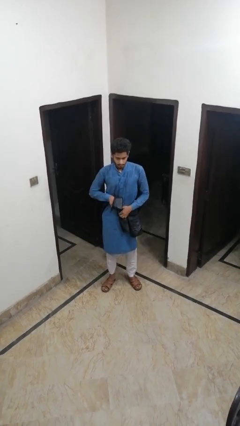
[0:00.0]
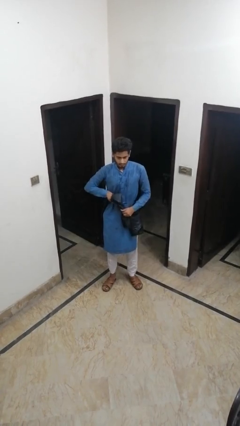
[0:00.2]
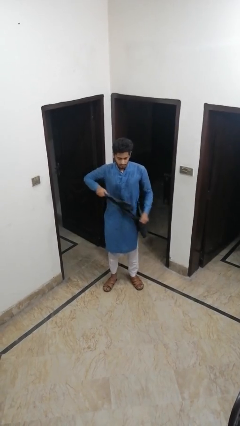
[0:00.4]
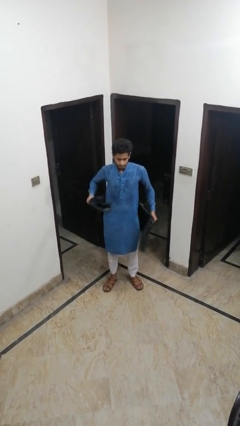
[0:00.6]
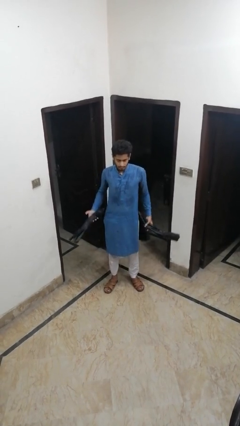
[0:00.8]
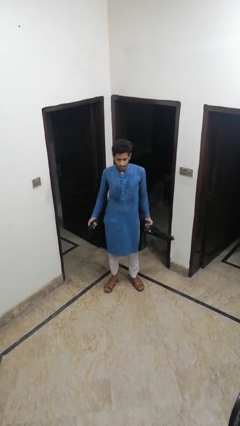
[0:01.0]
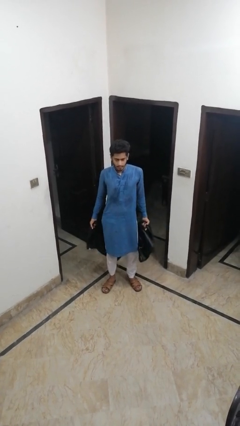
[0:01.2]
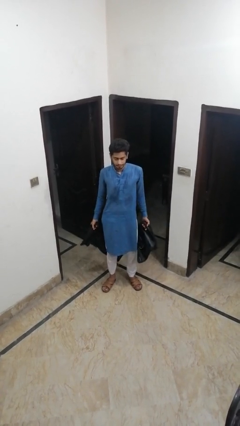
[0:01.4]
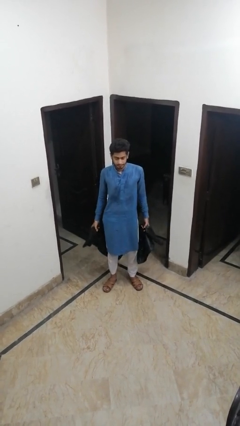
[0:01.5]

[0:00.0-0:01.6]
person unties jacket around waist

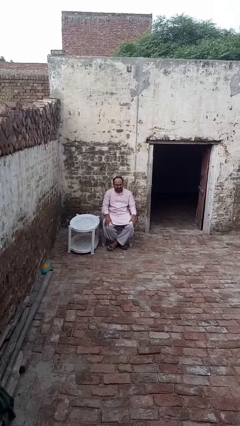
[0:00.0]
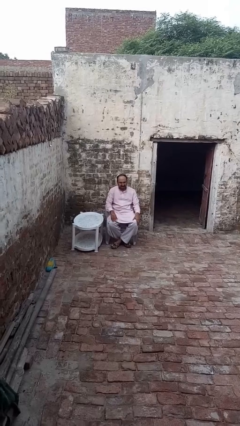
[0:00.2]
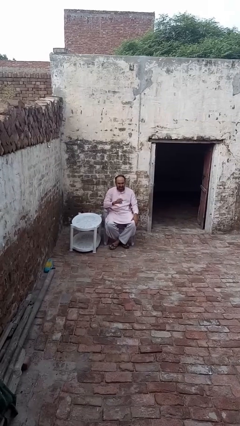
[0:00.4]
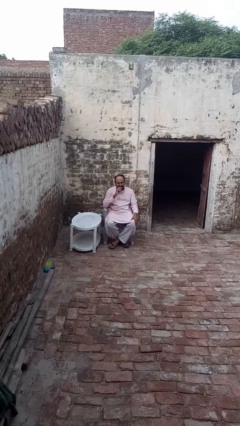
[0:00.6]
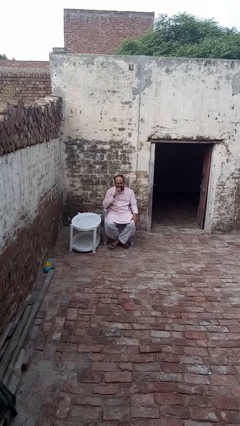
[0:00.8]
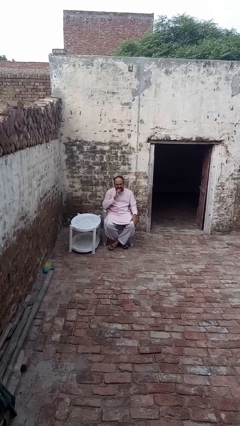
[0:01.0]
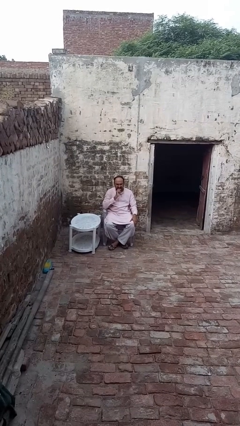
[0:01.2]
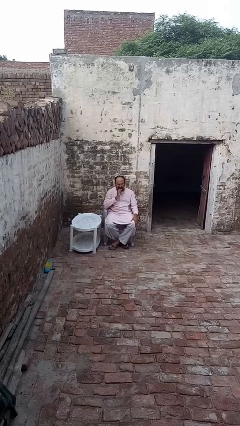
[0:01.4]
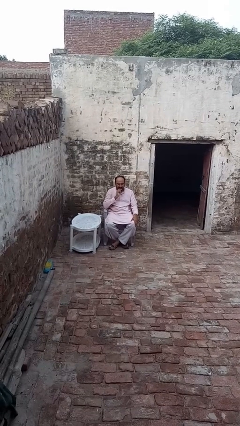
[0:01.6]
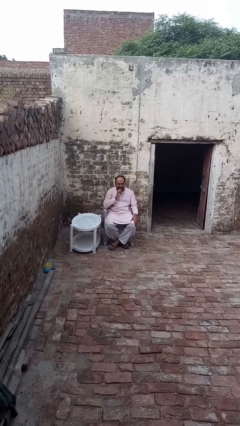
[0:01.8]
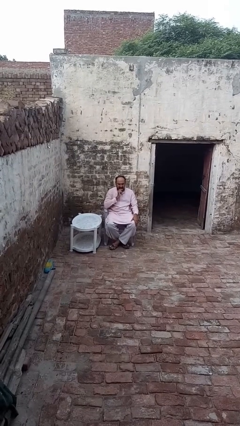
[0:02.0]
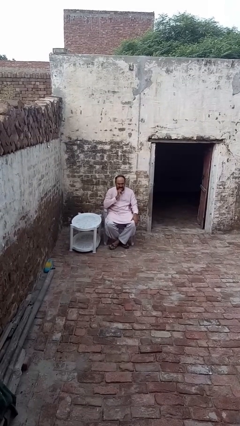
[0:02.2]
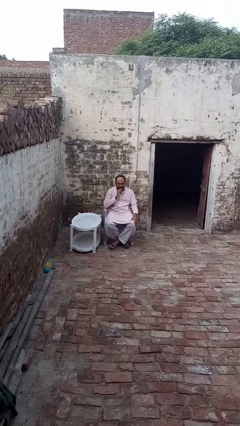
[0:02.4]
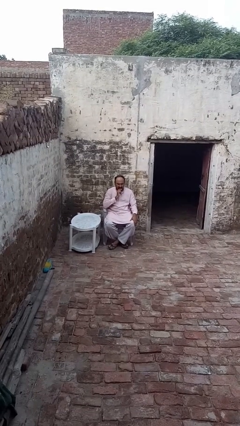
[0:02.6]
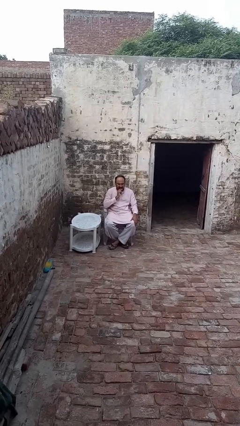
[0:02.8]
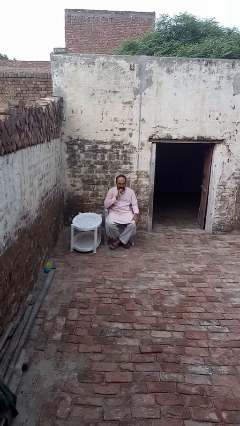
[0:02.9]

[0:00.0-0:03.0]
person strokes chin

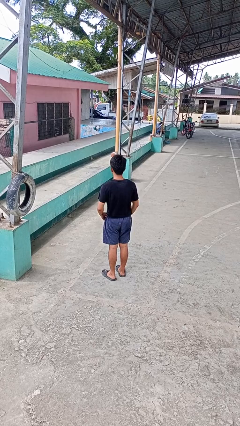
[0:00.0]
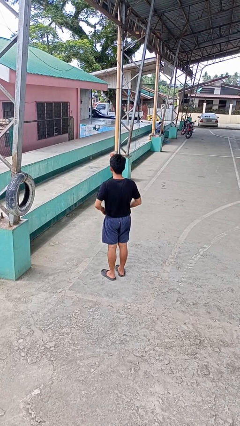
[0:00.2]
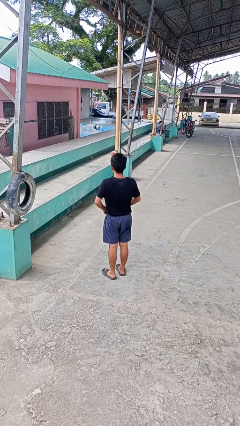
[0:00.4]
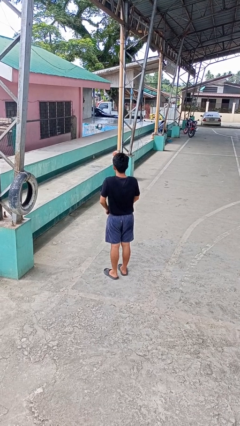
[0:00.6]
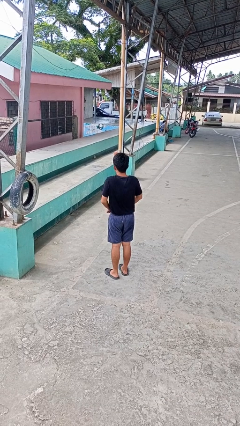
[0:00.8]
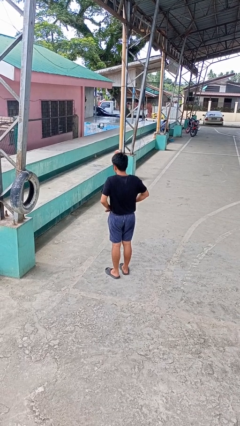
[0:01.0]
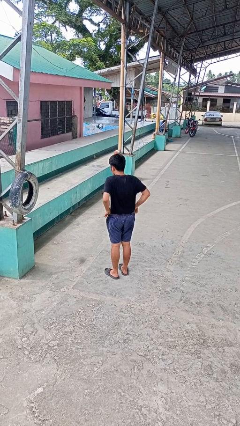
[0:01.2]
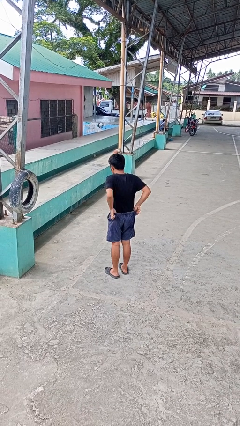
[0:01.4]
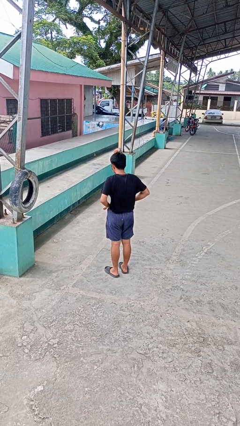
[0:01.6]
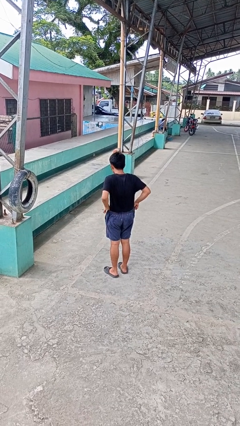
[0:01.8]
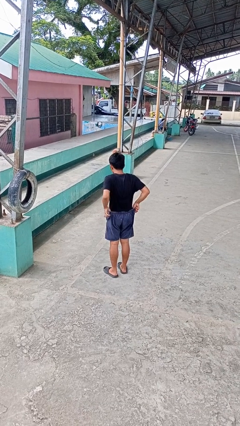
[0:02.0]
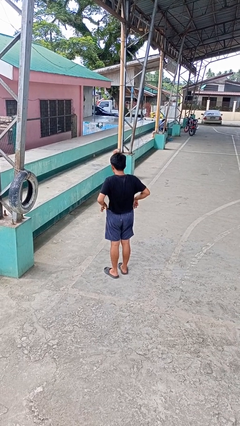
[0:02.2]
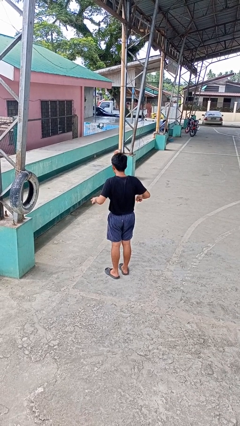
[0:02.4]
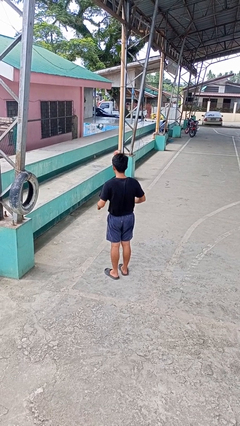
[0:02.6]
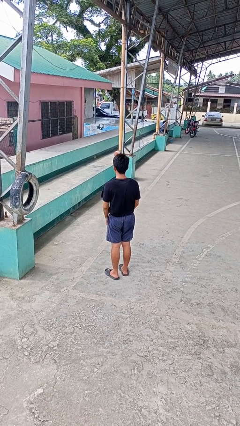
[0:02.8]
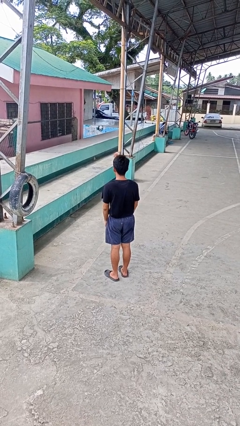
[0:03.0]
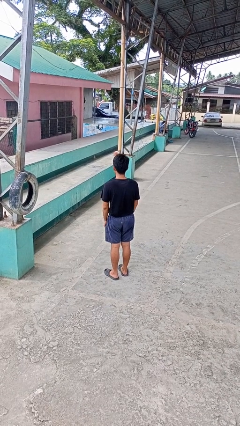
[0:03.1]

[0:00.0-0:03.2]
person hikes up pants

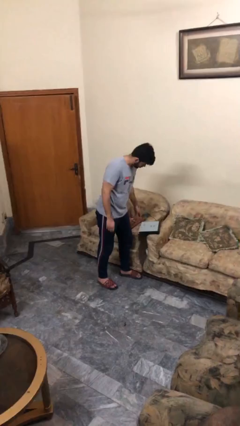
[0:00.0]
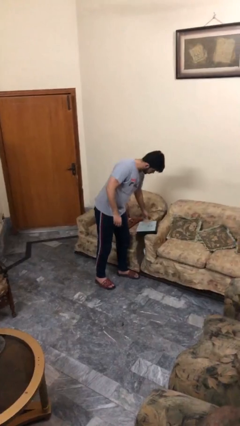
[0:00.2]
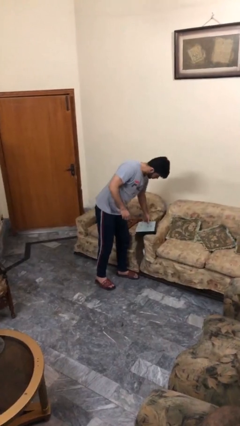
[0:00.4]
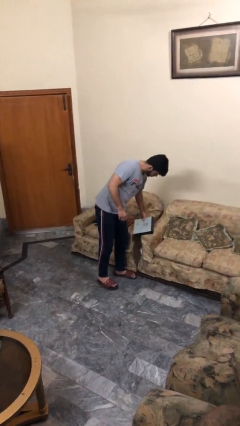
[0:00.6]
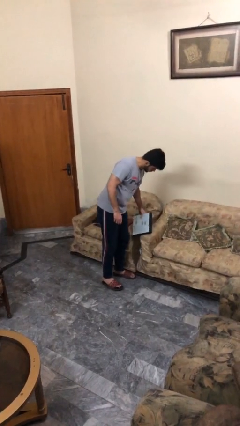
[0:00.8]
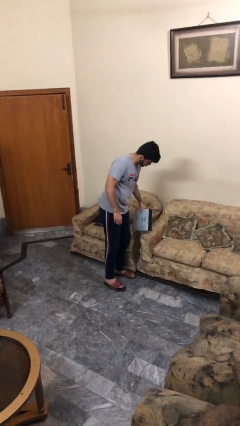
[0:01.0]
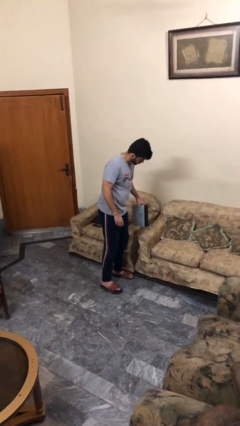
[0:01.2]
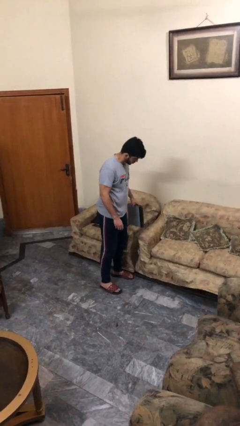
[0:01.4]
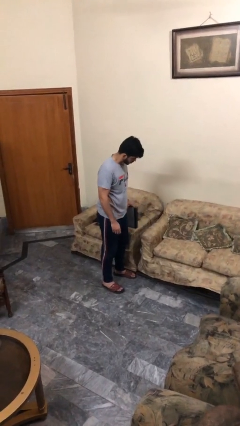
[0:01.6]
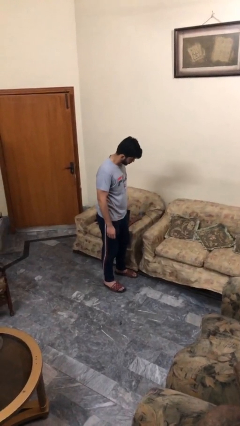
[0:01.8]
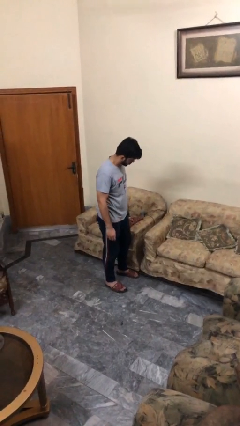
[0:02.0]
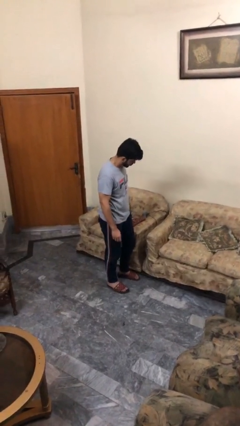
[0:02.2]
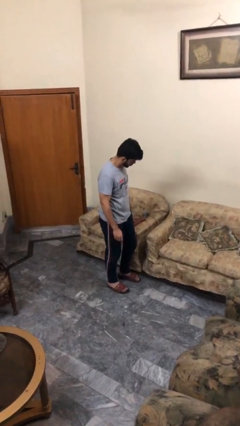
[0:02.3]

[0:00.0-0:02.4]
person picks up object from couch

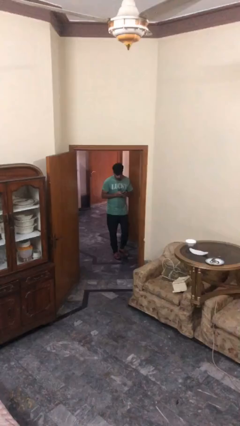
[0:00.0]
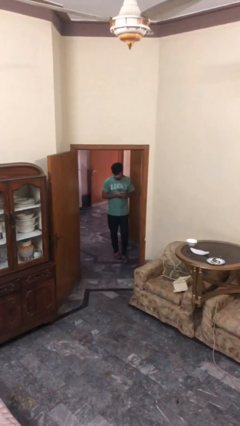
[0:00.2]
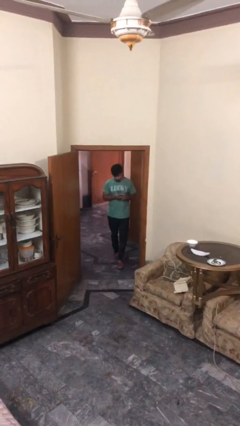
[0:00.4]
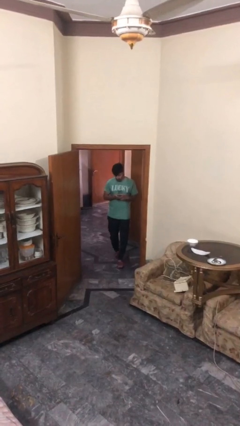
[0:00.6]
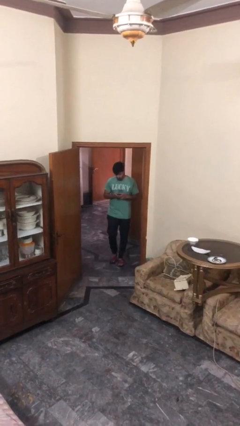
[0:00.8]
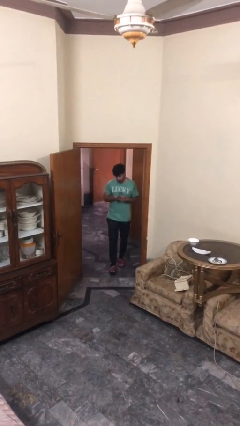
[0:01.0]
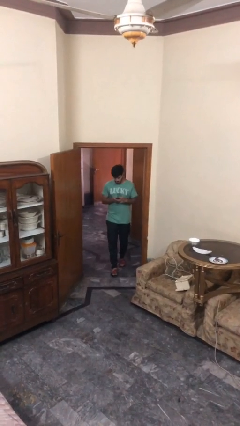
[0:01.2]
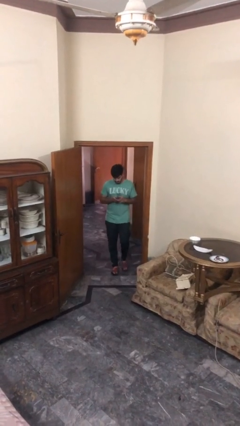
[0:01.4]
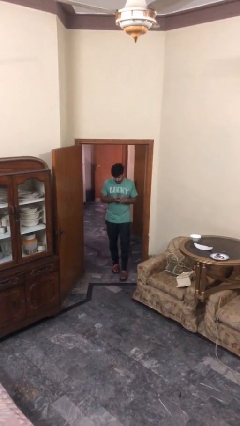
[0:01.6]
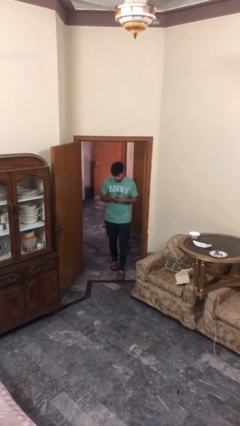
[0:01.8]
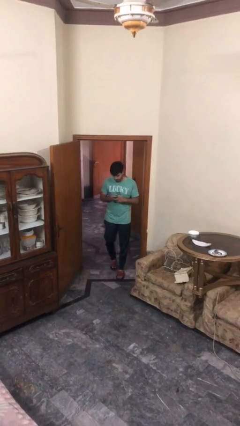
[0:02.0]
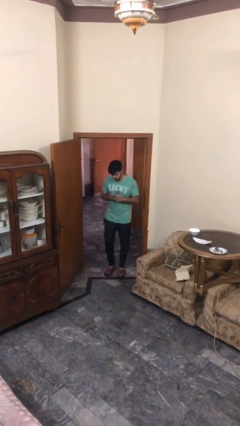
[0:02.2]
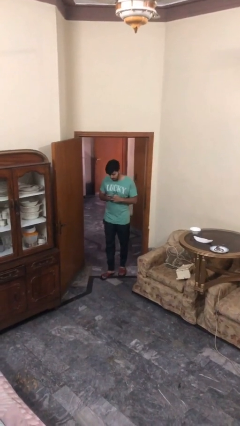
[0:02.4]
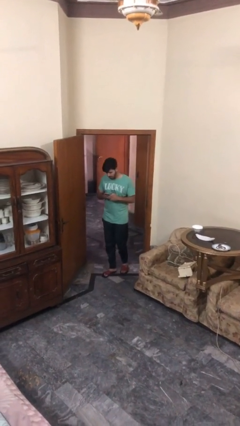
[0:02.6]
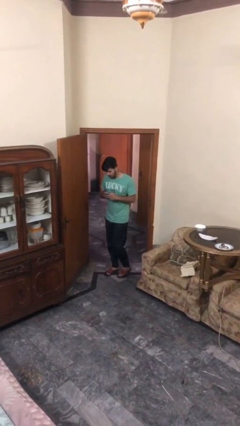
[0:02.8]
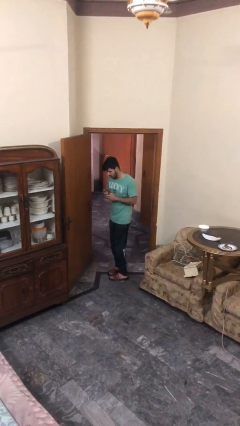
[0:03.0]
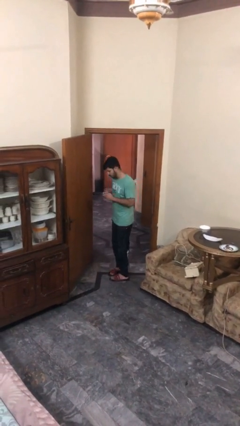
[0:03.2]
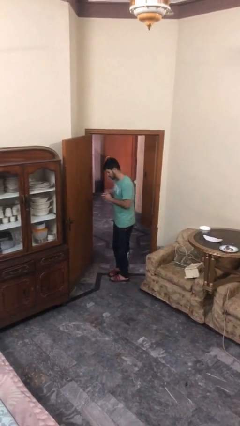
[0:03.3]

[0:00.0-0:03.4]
person enters scene through structure

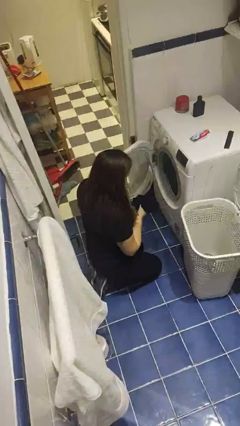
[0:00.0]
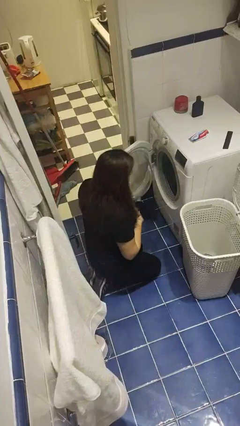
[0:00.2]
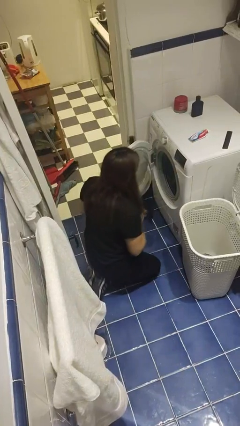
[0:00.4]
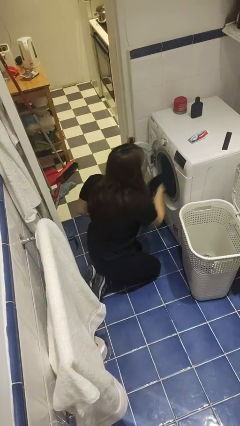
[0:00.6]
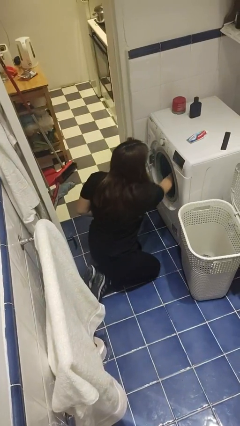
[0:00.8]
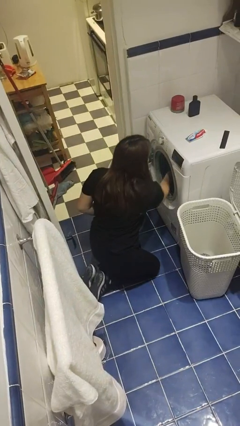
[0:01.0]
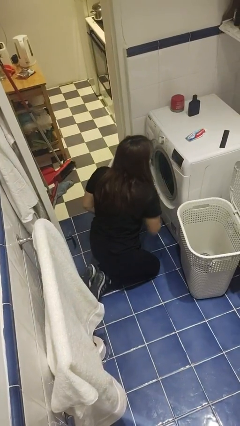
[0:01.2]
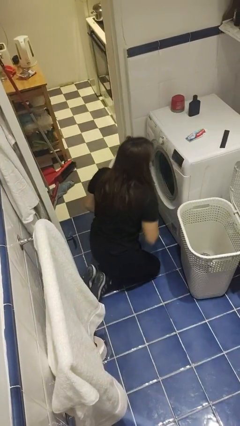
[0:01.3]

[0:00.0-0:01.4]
person loads clotheswasher

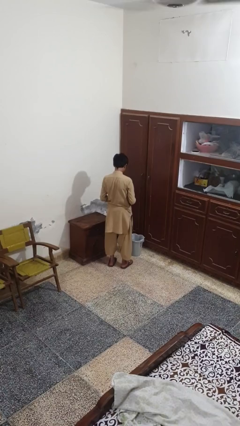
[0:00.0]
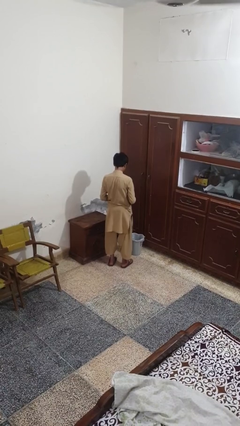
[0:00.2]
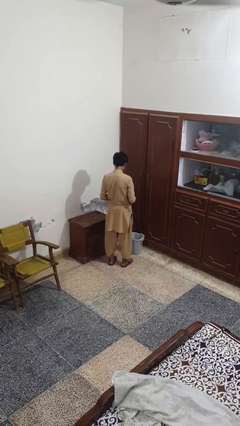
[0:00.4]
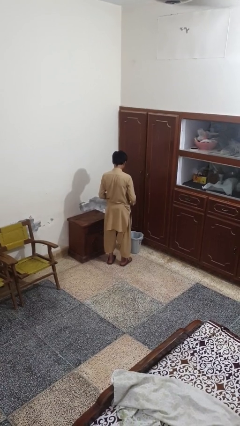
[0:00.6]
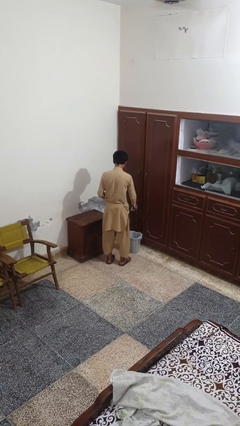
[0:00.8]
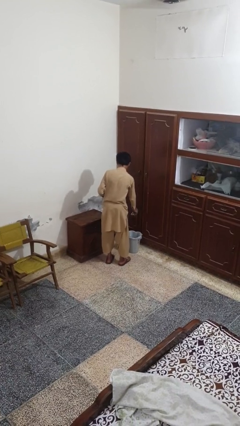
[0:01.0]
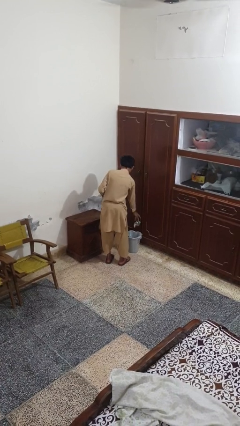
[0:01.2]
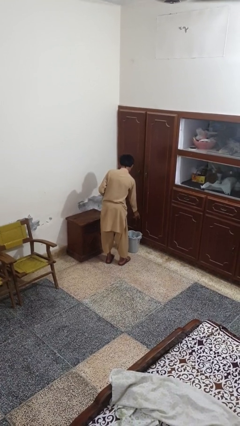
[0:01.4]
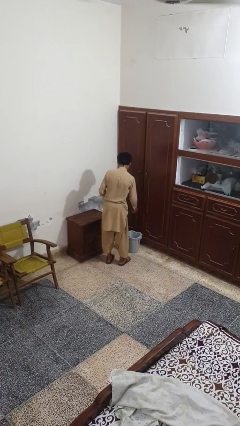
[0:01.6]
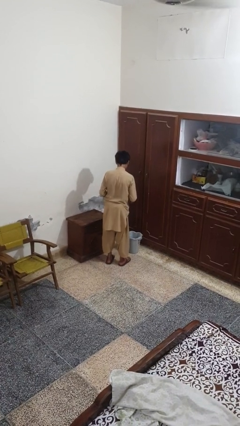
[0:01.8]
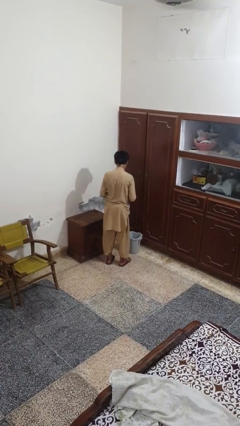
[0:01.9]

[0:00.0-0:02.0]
person discards trash

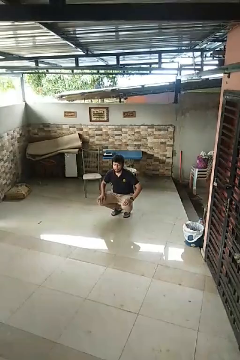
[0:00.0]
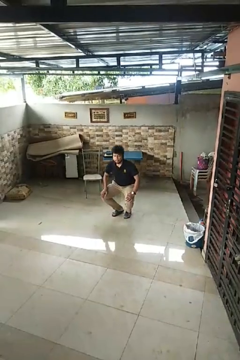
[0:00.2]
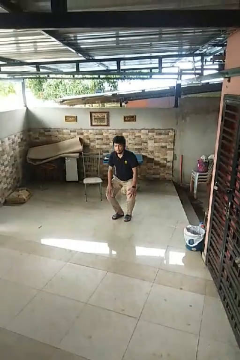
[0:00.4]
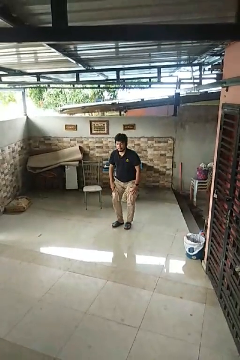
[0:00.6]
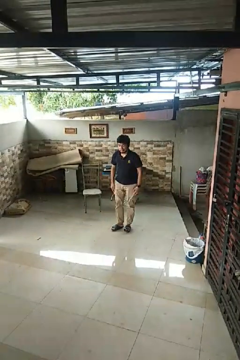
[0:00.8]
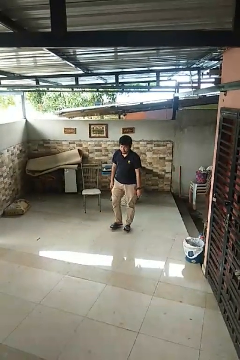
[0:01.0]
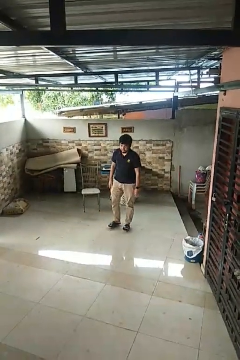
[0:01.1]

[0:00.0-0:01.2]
person stands up
